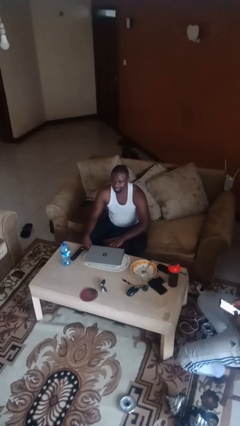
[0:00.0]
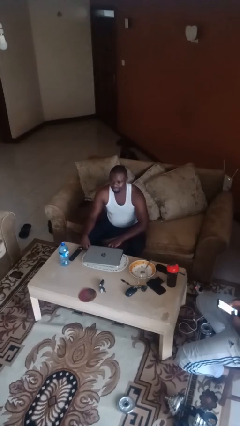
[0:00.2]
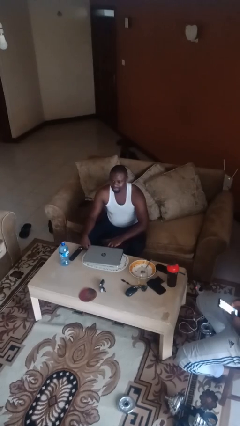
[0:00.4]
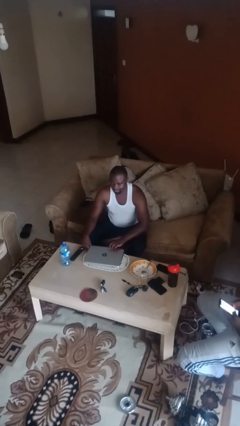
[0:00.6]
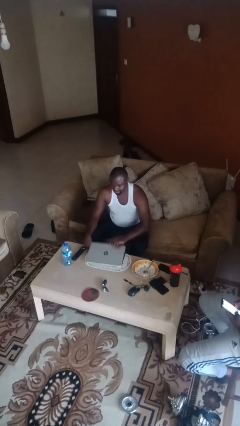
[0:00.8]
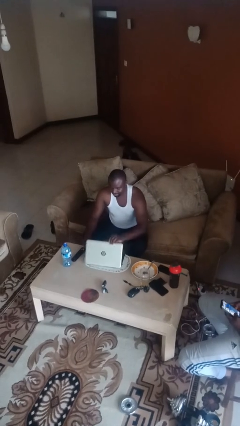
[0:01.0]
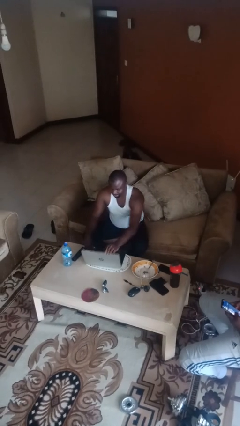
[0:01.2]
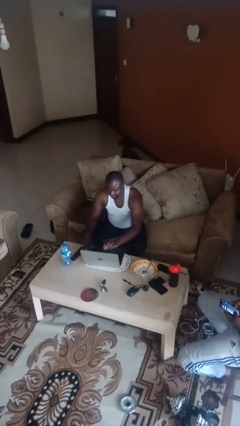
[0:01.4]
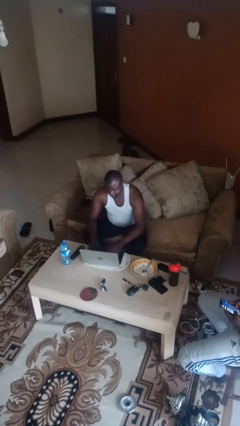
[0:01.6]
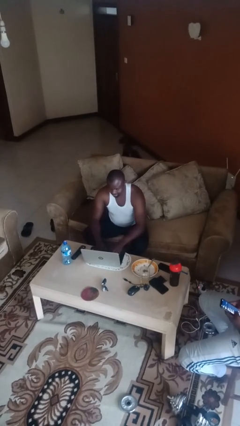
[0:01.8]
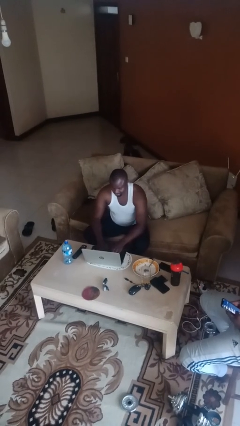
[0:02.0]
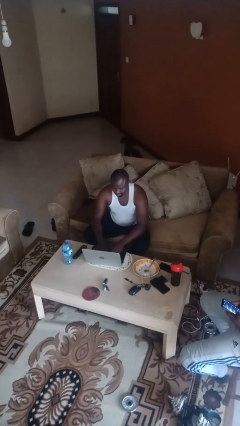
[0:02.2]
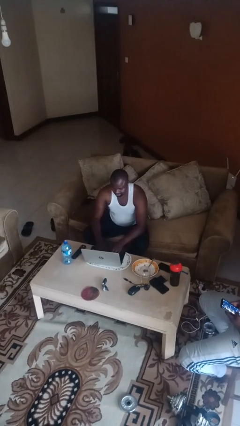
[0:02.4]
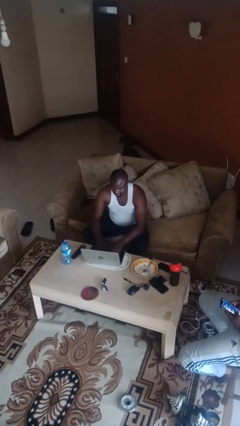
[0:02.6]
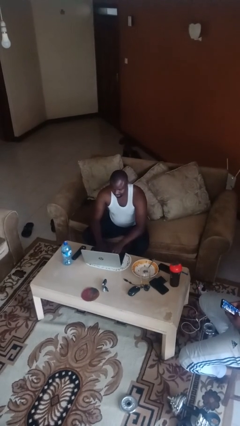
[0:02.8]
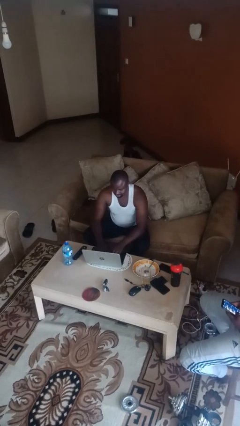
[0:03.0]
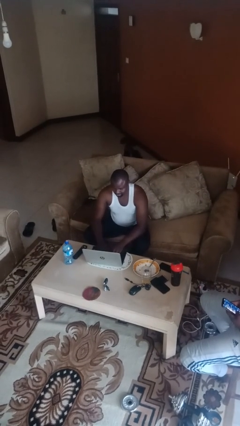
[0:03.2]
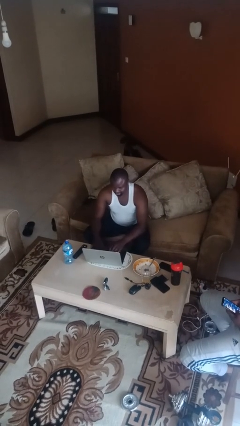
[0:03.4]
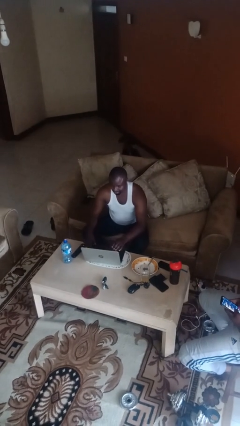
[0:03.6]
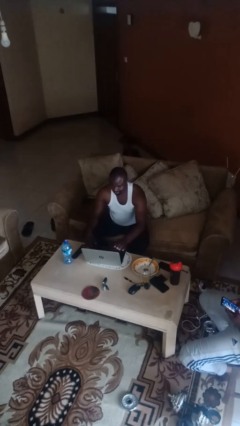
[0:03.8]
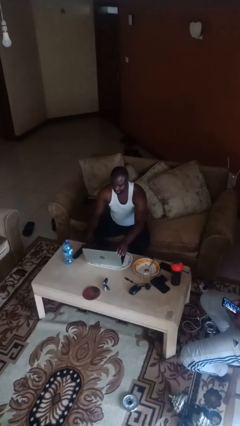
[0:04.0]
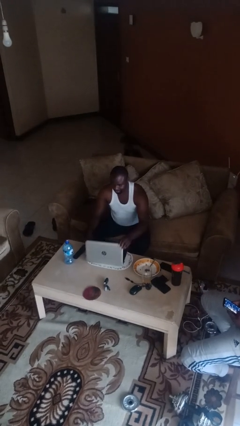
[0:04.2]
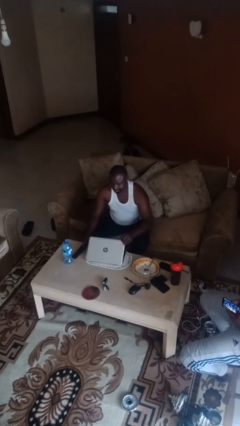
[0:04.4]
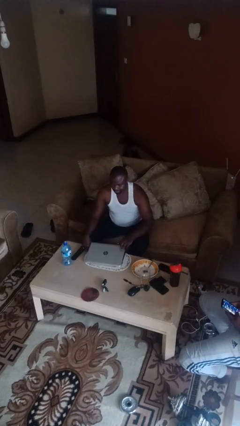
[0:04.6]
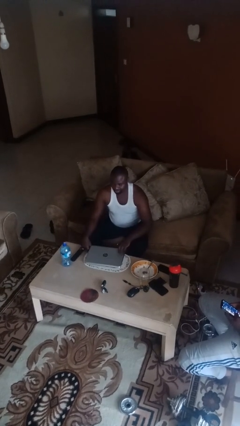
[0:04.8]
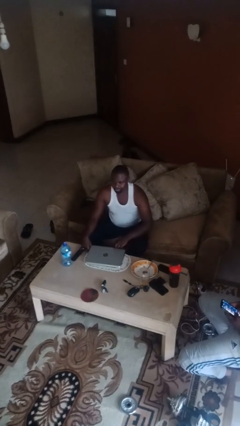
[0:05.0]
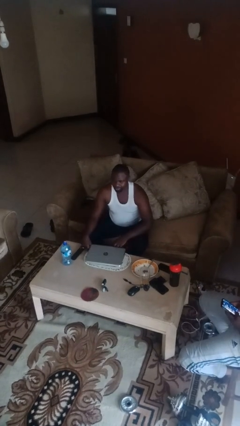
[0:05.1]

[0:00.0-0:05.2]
person interacts with laptop

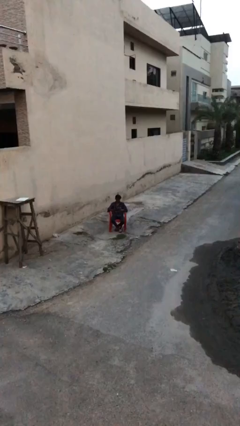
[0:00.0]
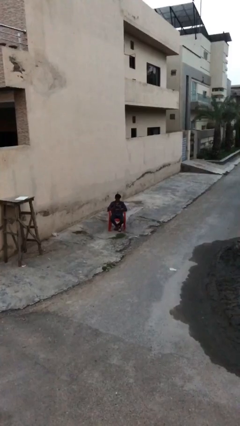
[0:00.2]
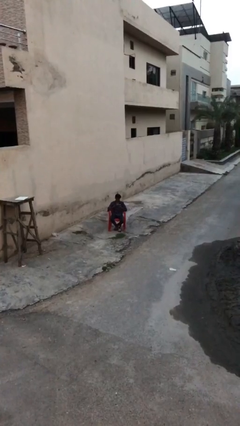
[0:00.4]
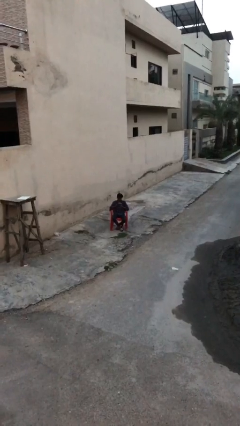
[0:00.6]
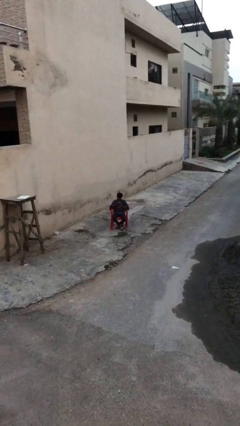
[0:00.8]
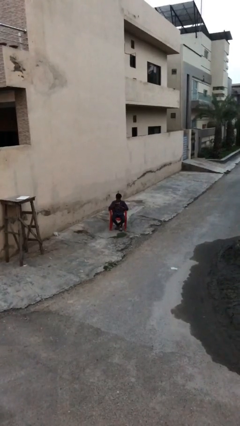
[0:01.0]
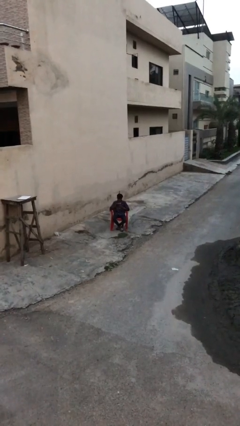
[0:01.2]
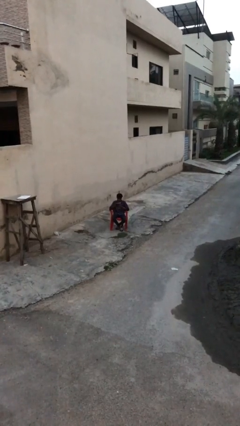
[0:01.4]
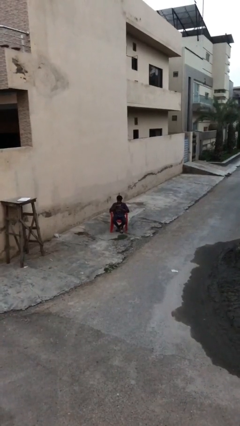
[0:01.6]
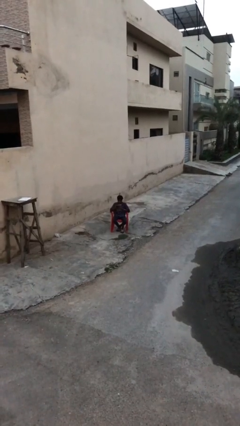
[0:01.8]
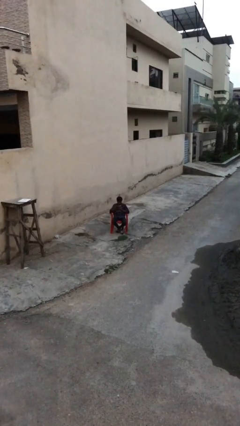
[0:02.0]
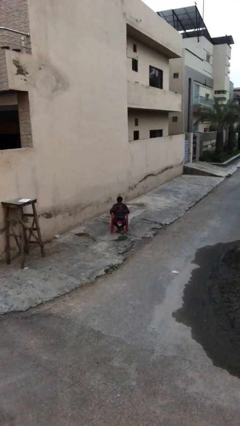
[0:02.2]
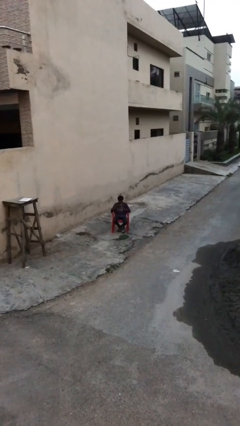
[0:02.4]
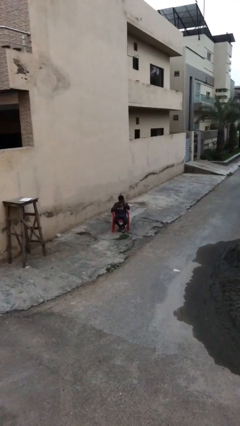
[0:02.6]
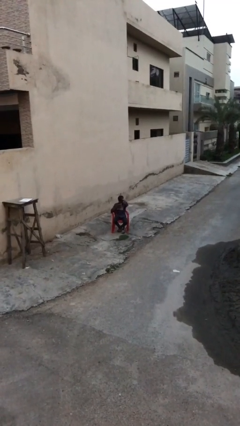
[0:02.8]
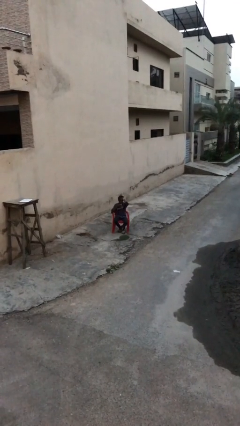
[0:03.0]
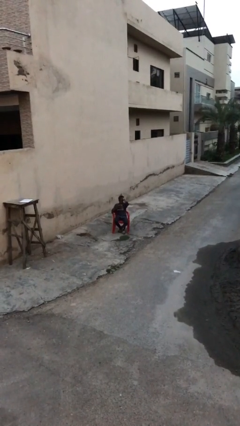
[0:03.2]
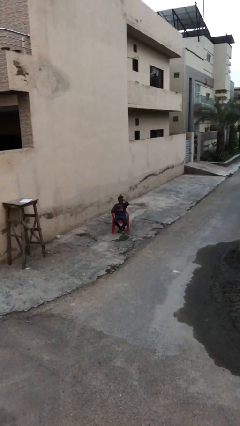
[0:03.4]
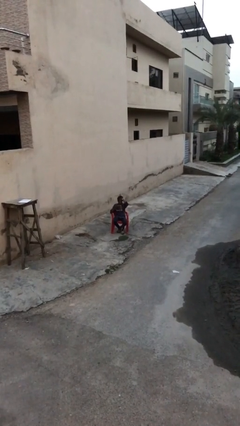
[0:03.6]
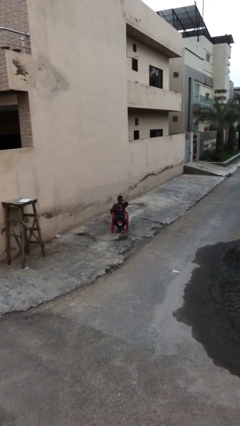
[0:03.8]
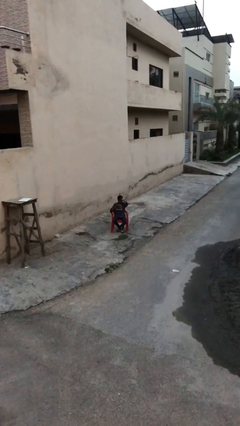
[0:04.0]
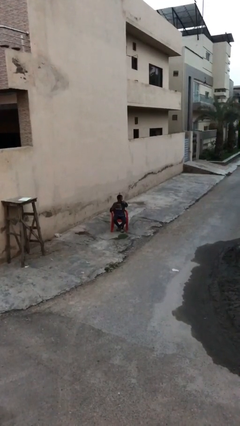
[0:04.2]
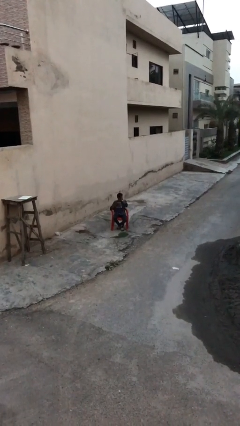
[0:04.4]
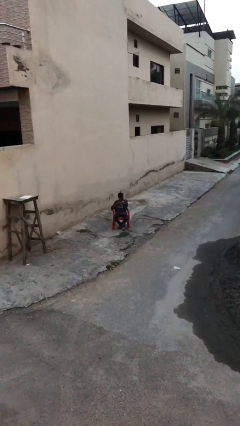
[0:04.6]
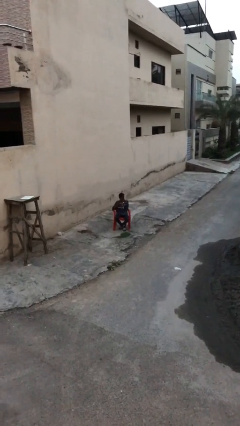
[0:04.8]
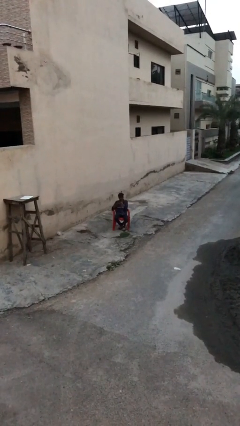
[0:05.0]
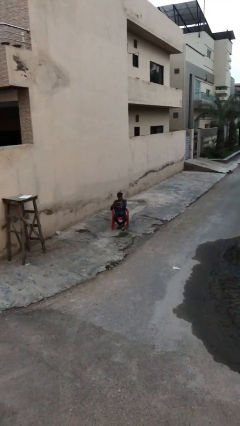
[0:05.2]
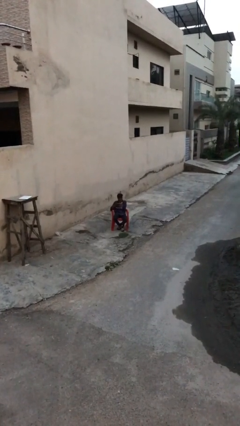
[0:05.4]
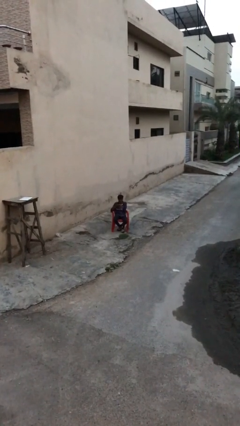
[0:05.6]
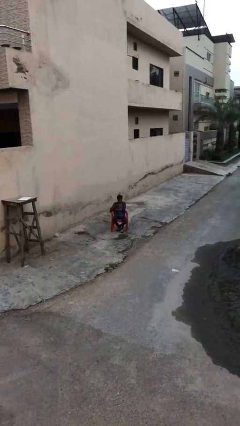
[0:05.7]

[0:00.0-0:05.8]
person reads document

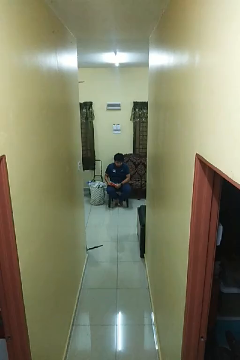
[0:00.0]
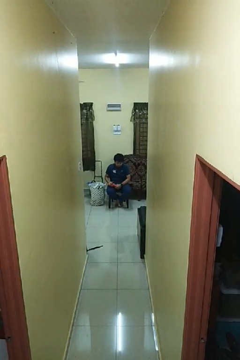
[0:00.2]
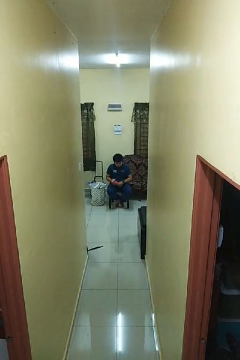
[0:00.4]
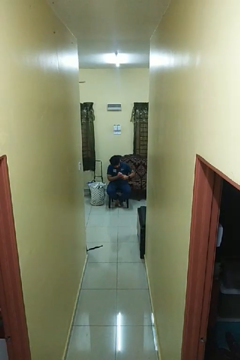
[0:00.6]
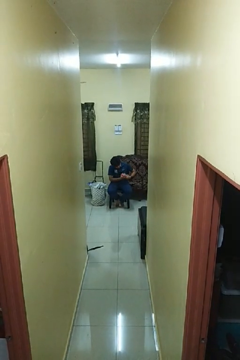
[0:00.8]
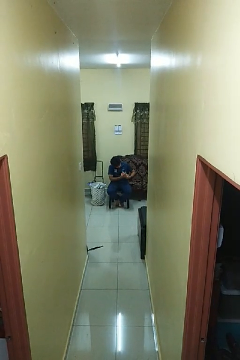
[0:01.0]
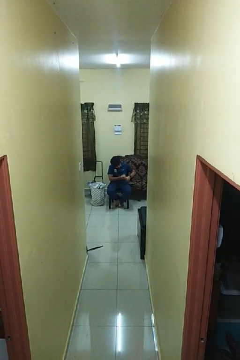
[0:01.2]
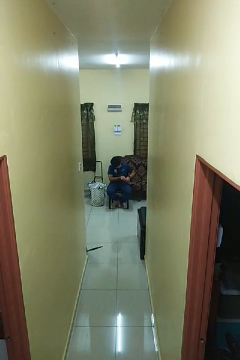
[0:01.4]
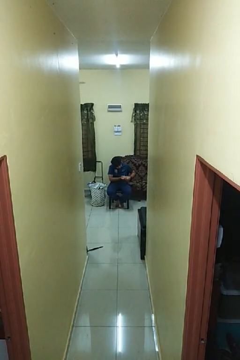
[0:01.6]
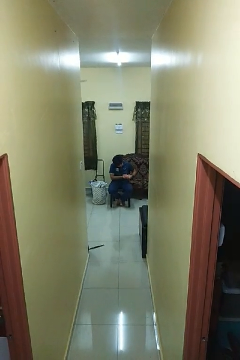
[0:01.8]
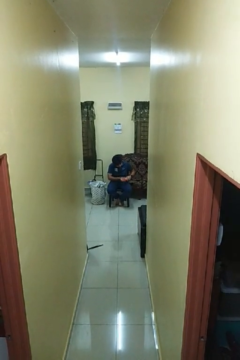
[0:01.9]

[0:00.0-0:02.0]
person squeezes object

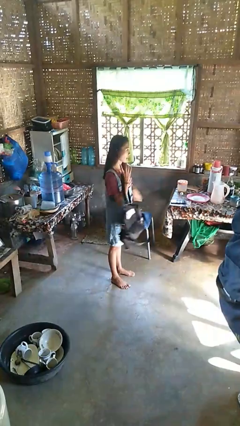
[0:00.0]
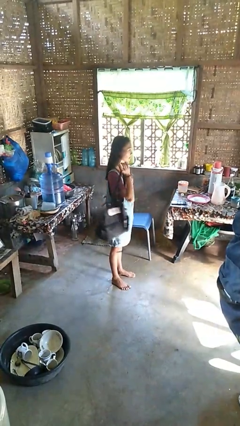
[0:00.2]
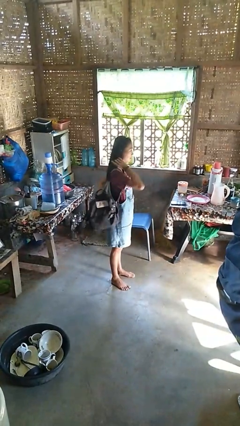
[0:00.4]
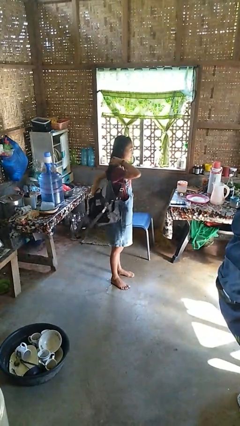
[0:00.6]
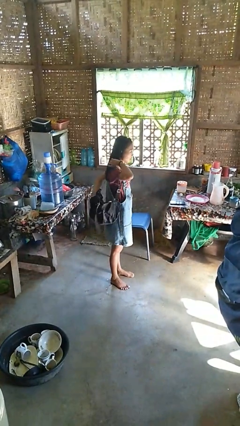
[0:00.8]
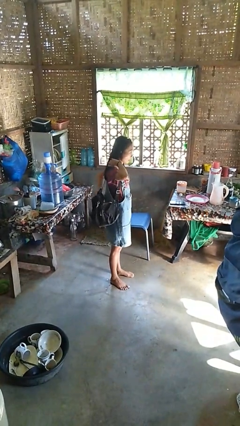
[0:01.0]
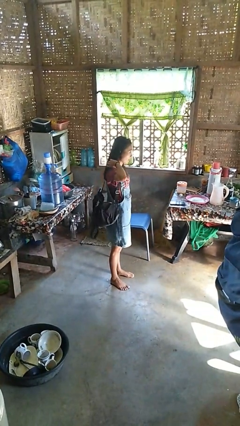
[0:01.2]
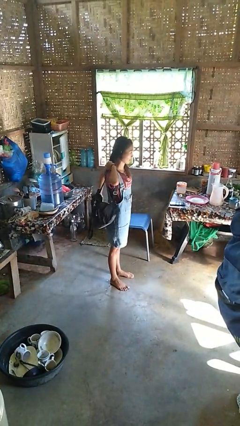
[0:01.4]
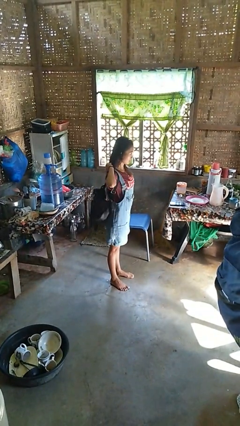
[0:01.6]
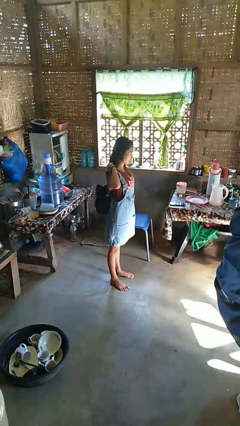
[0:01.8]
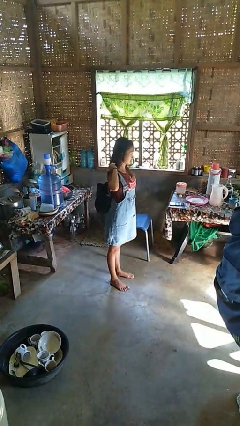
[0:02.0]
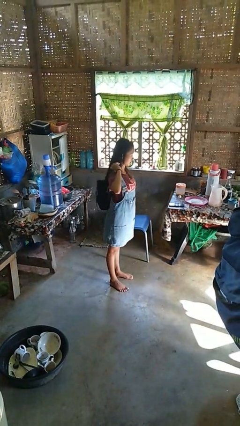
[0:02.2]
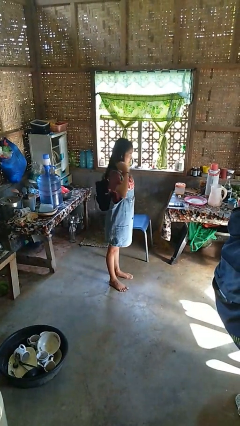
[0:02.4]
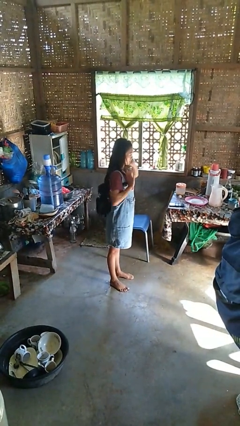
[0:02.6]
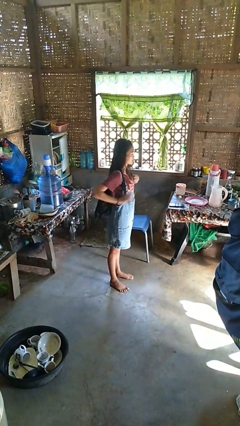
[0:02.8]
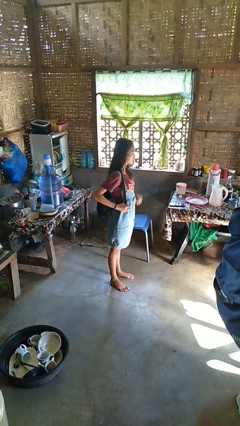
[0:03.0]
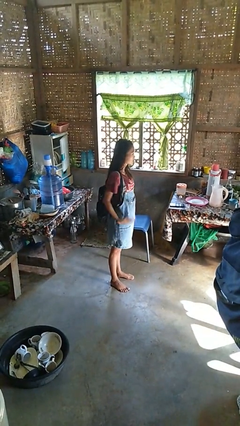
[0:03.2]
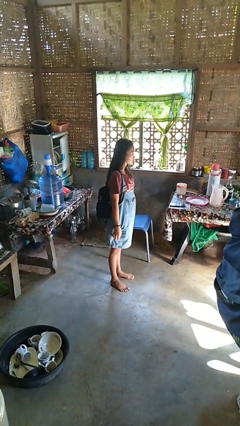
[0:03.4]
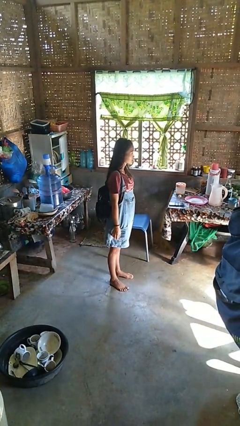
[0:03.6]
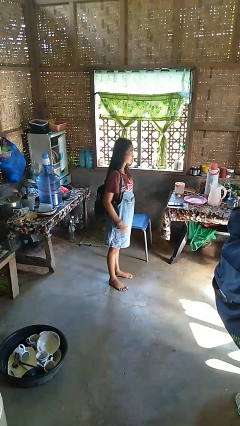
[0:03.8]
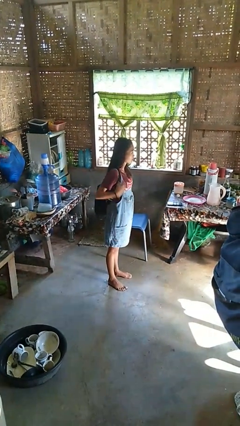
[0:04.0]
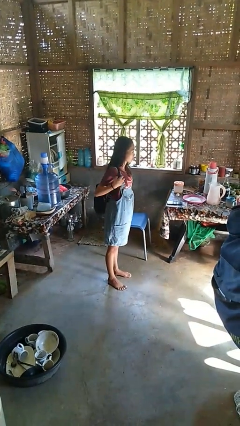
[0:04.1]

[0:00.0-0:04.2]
person puts on backpack

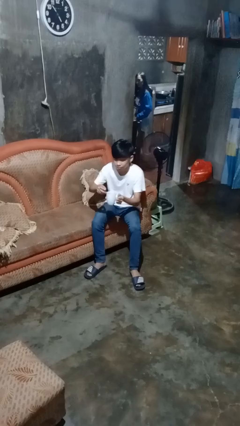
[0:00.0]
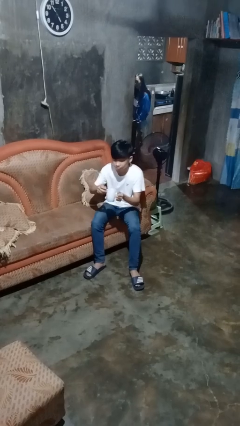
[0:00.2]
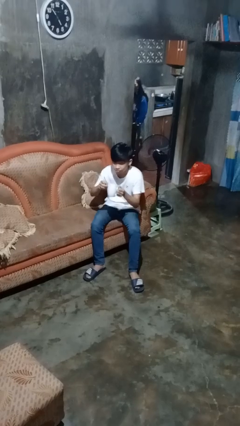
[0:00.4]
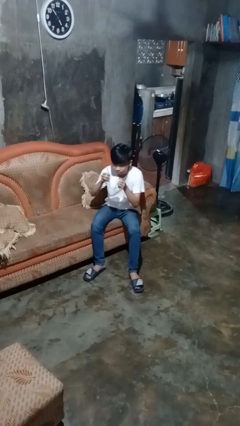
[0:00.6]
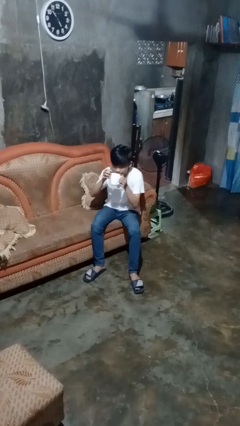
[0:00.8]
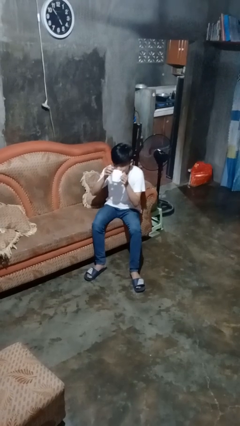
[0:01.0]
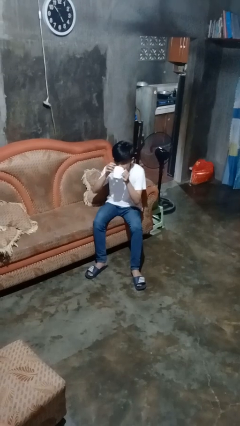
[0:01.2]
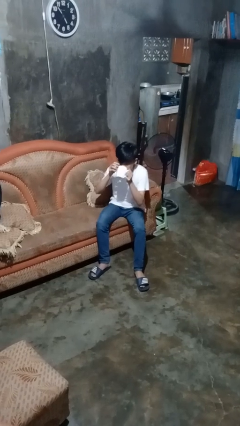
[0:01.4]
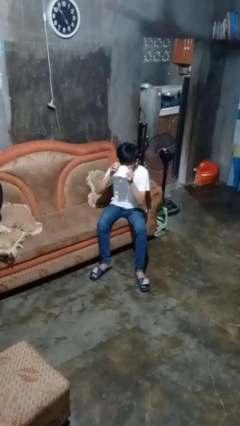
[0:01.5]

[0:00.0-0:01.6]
person drinks from mug
